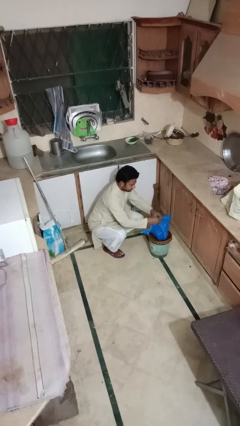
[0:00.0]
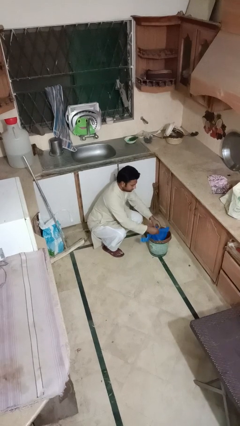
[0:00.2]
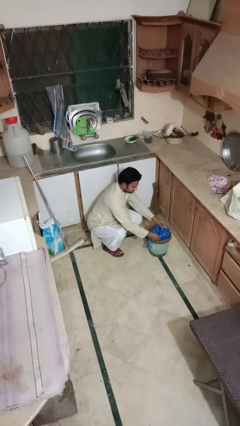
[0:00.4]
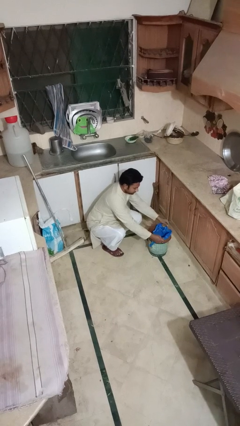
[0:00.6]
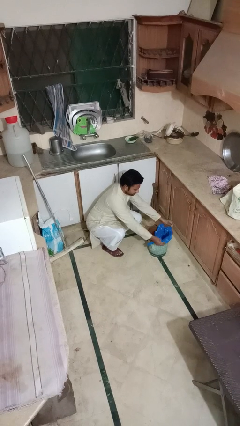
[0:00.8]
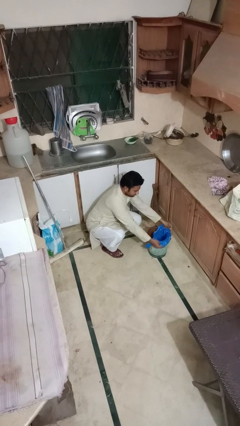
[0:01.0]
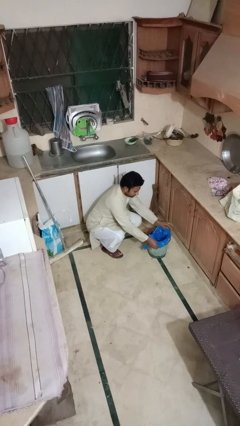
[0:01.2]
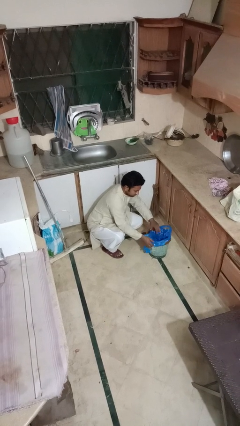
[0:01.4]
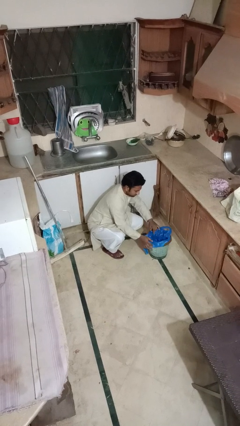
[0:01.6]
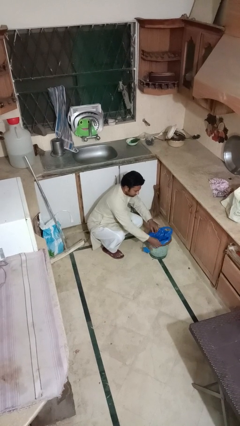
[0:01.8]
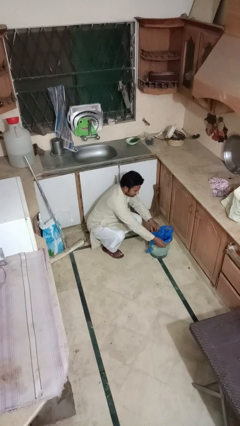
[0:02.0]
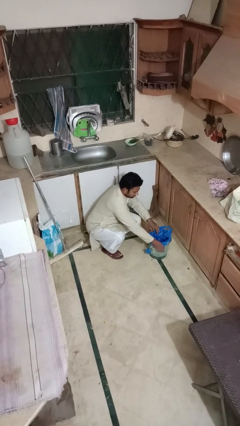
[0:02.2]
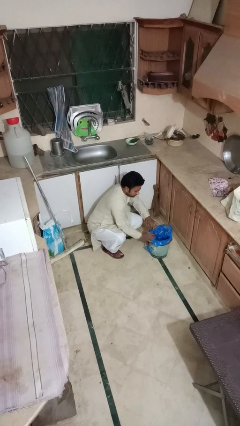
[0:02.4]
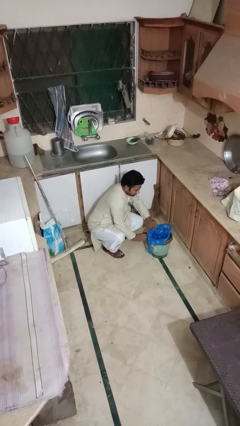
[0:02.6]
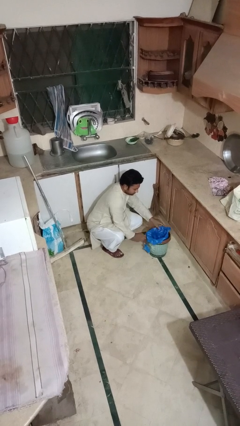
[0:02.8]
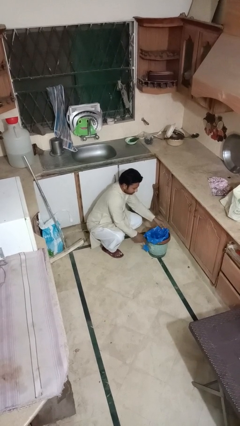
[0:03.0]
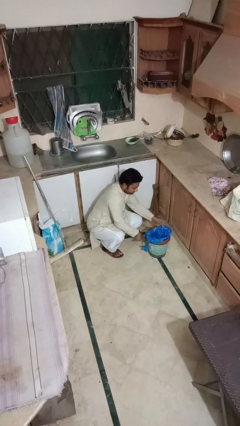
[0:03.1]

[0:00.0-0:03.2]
person inserts trashbag into trashcan

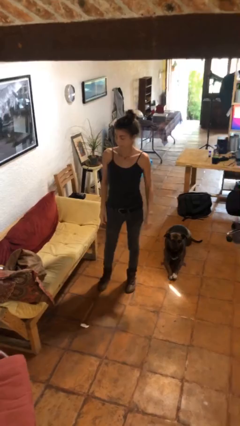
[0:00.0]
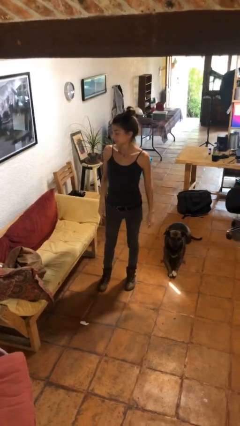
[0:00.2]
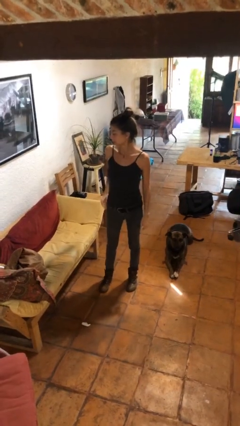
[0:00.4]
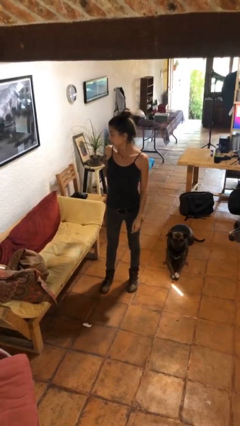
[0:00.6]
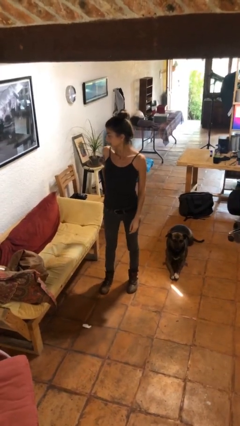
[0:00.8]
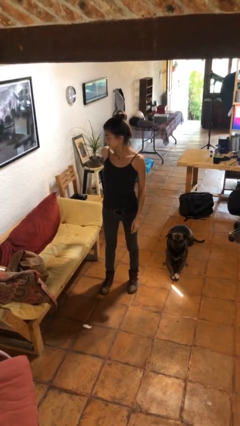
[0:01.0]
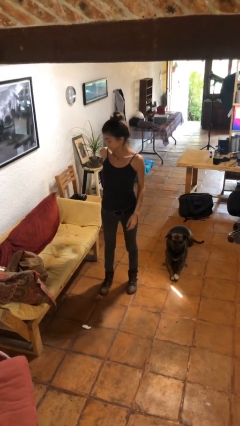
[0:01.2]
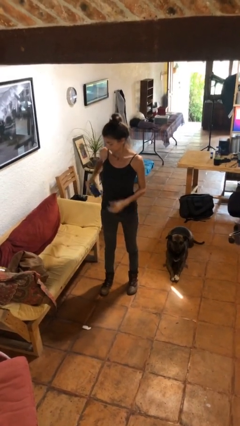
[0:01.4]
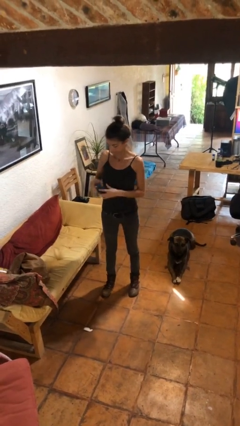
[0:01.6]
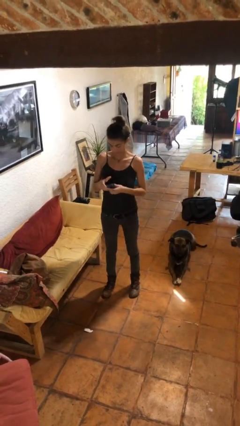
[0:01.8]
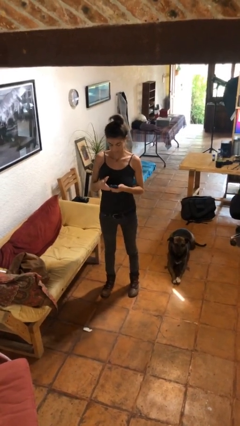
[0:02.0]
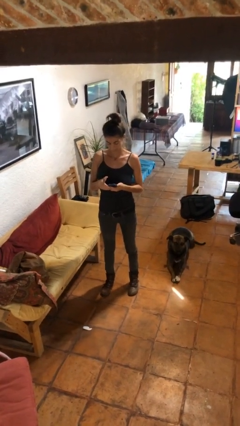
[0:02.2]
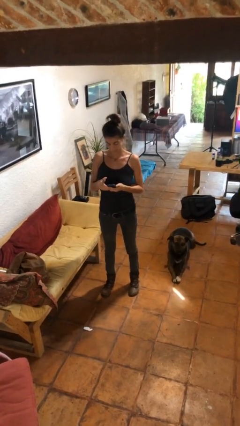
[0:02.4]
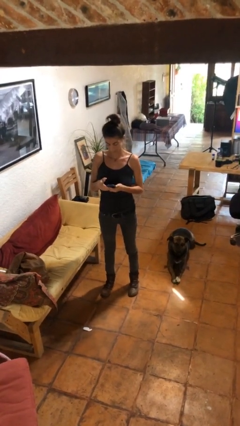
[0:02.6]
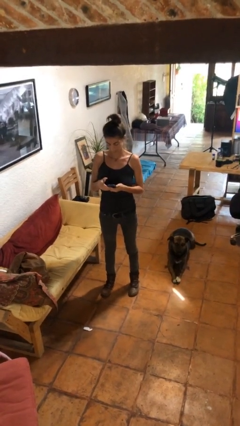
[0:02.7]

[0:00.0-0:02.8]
person takes phone from pocket

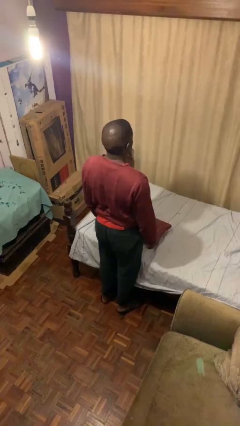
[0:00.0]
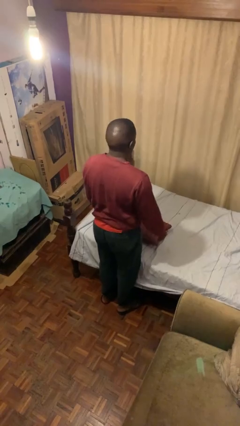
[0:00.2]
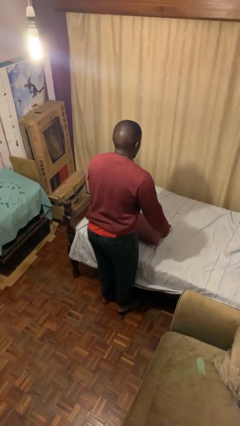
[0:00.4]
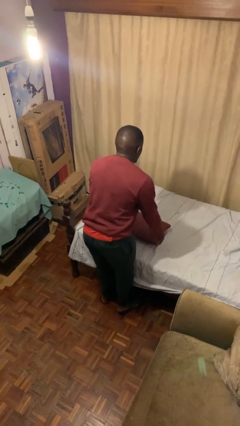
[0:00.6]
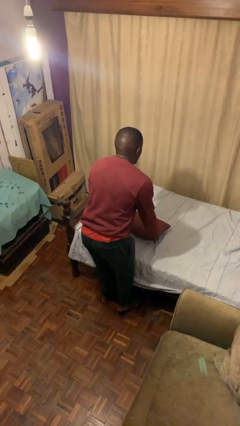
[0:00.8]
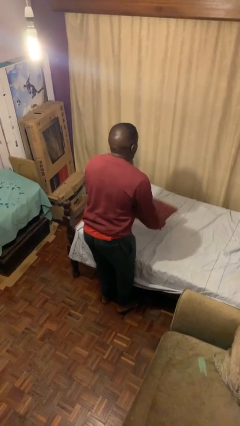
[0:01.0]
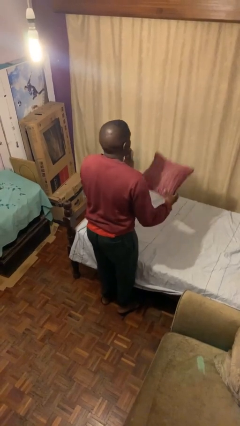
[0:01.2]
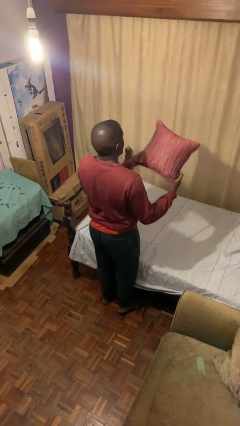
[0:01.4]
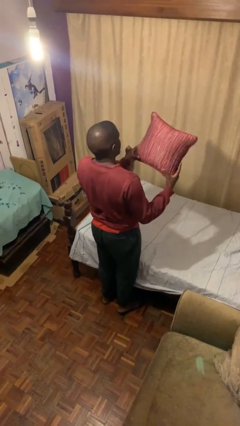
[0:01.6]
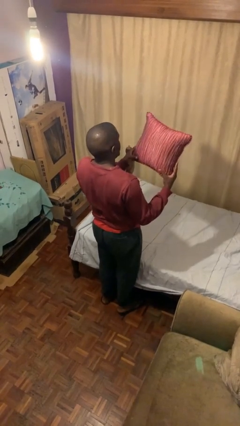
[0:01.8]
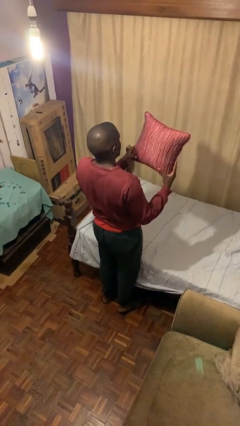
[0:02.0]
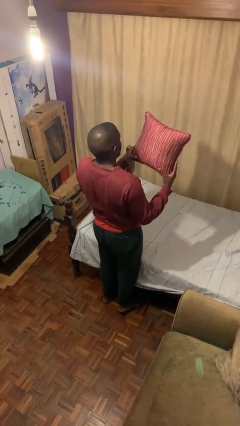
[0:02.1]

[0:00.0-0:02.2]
person picks up object from bed

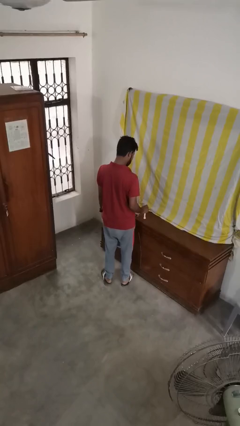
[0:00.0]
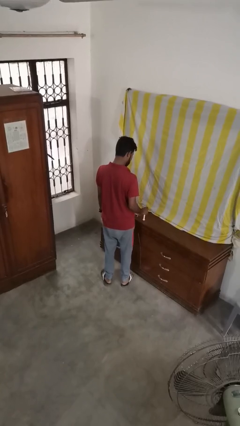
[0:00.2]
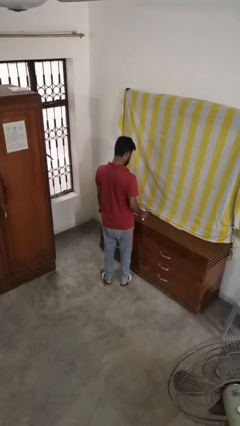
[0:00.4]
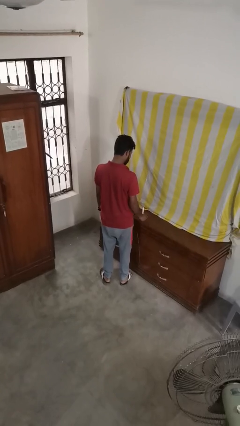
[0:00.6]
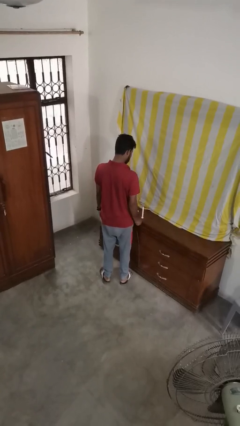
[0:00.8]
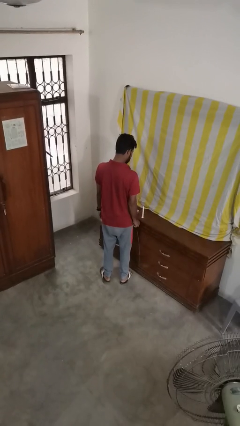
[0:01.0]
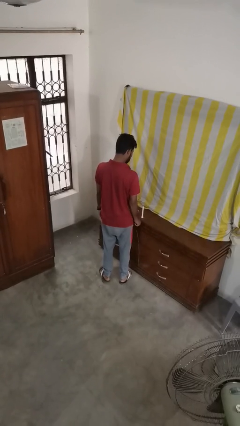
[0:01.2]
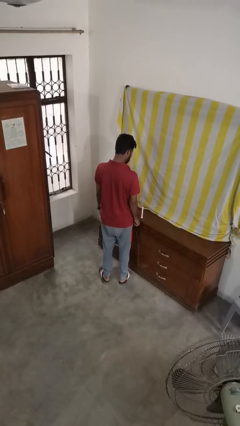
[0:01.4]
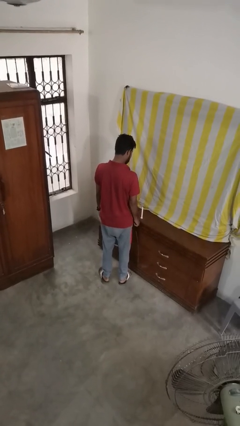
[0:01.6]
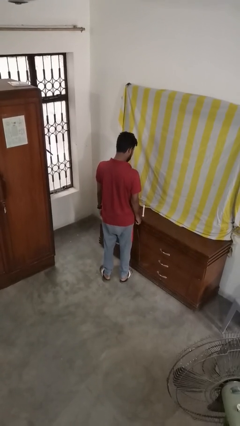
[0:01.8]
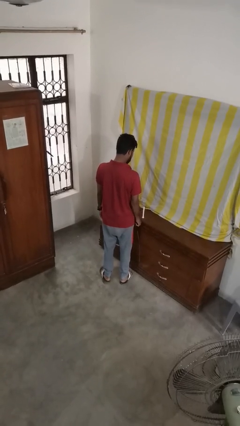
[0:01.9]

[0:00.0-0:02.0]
person extinguishes candle

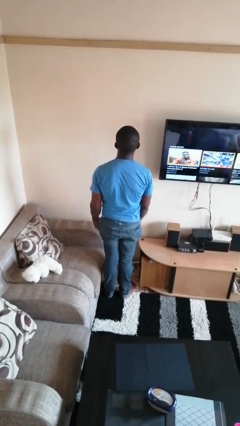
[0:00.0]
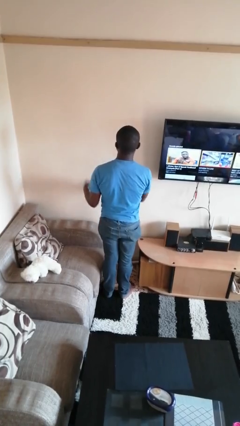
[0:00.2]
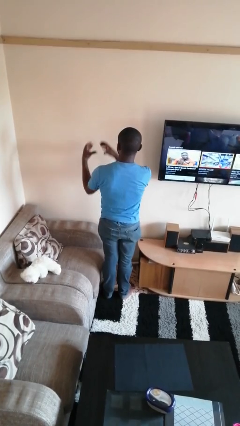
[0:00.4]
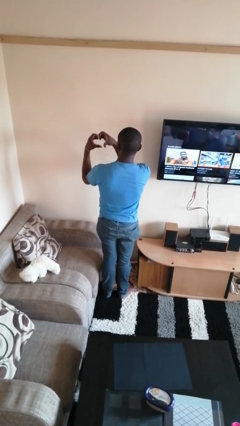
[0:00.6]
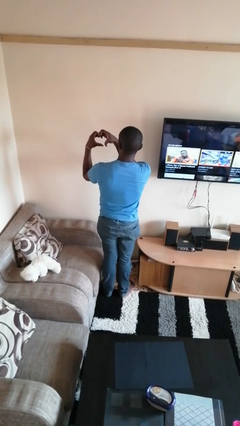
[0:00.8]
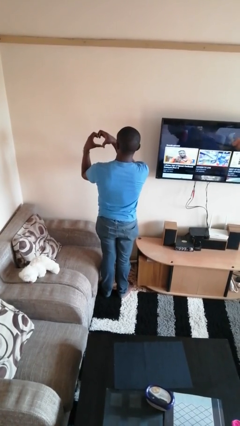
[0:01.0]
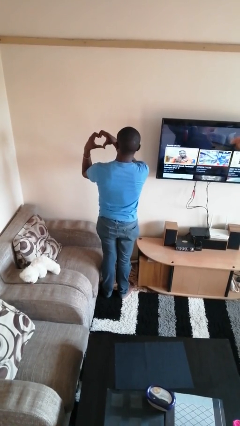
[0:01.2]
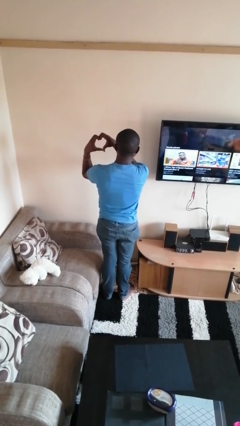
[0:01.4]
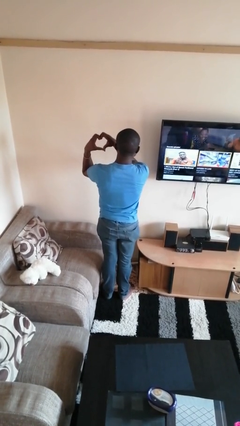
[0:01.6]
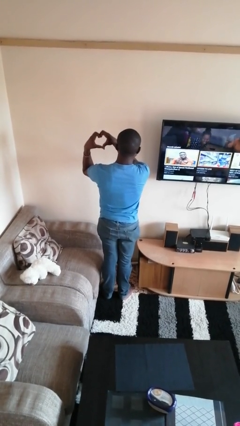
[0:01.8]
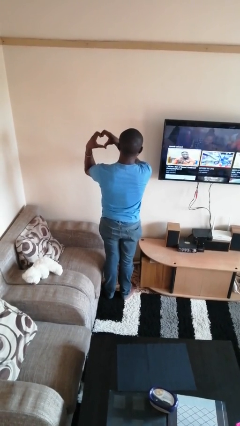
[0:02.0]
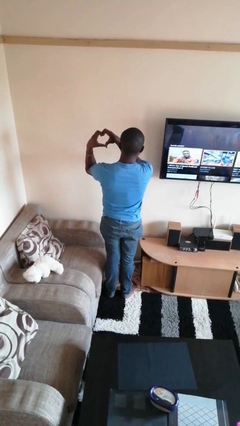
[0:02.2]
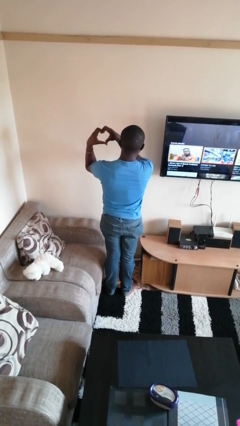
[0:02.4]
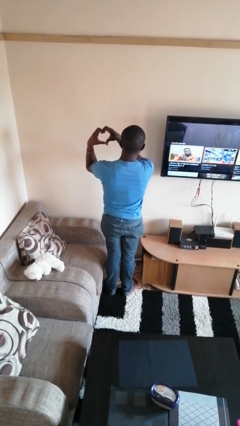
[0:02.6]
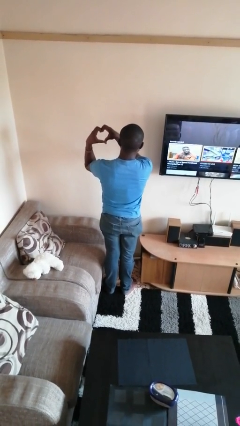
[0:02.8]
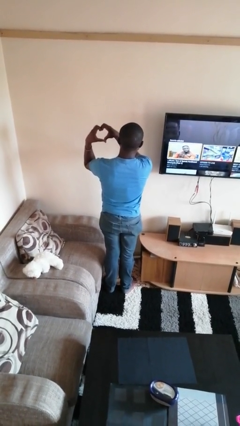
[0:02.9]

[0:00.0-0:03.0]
person gestures heart

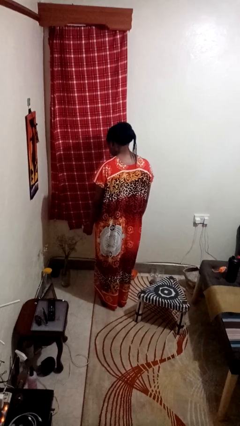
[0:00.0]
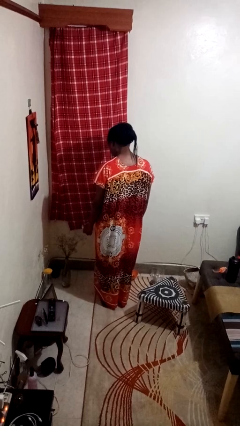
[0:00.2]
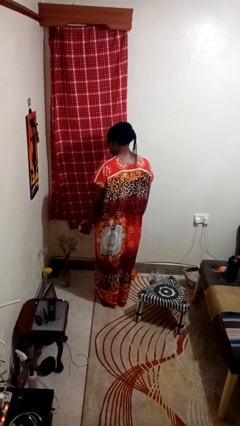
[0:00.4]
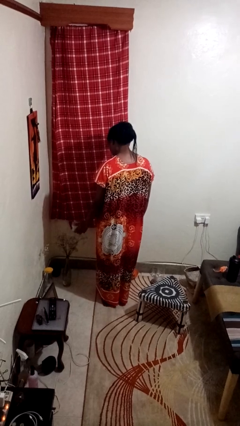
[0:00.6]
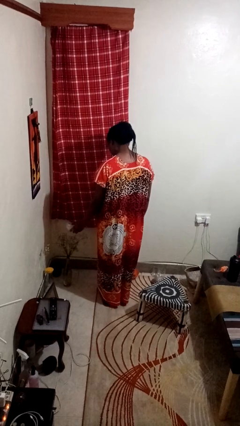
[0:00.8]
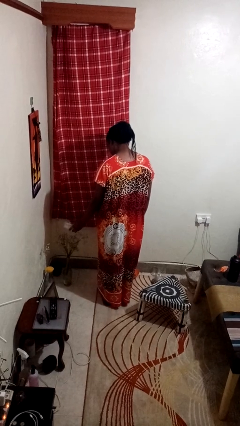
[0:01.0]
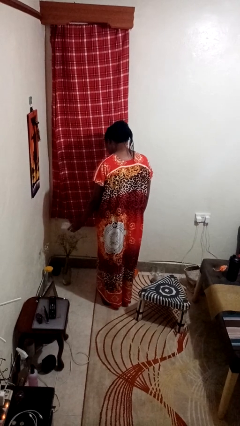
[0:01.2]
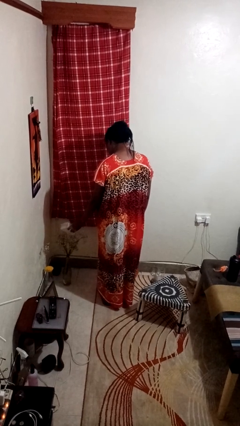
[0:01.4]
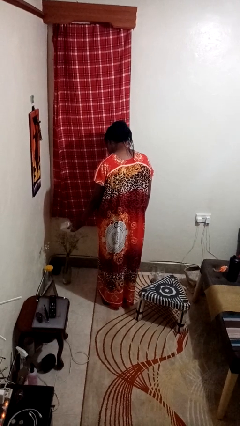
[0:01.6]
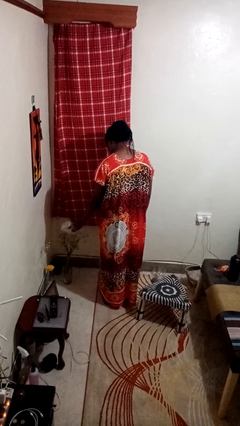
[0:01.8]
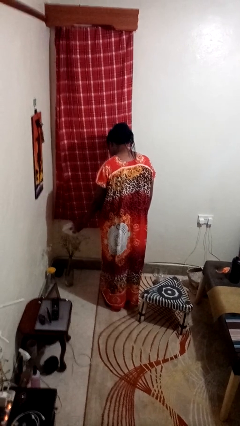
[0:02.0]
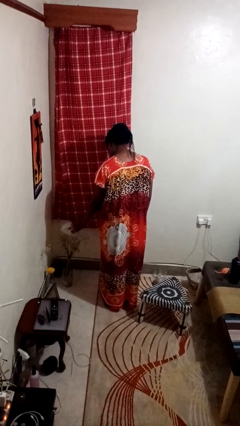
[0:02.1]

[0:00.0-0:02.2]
person waters houseplant

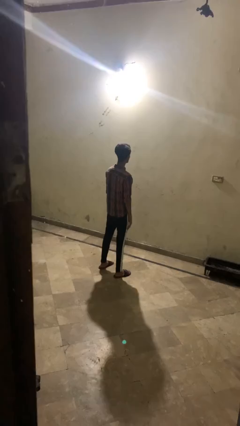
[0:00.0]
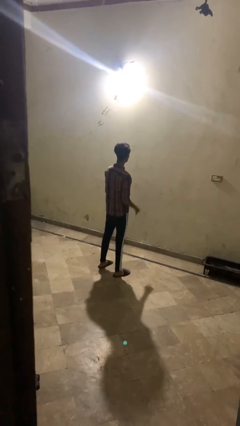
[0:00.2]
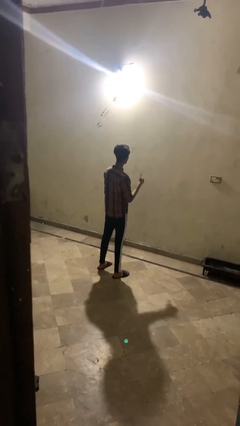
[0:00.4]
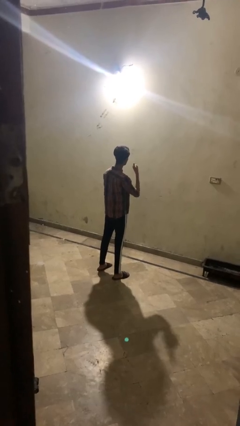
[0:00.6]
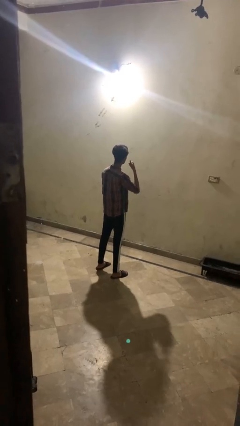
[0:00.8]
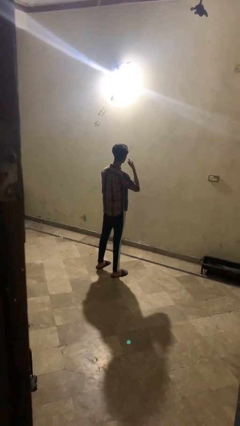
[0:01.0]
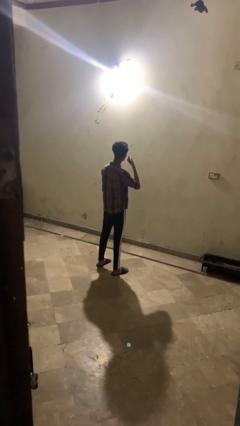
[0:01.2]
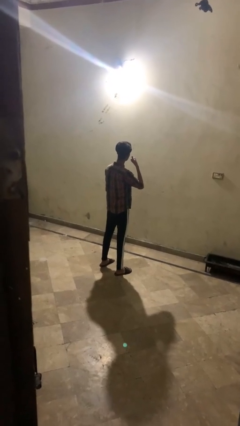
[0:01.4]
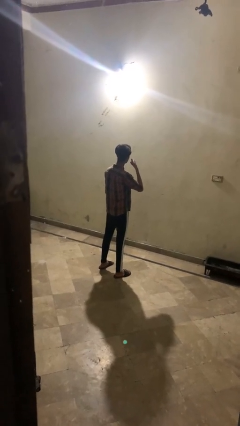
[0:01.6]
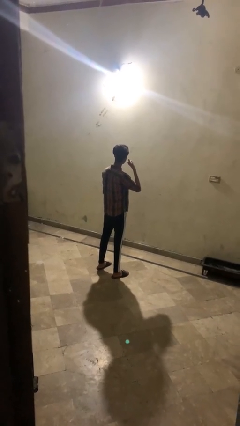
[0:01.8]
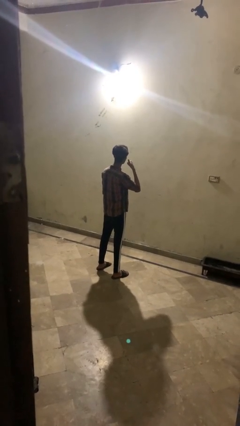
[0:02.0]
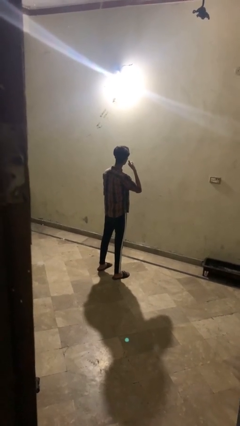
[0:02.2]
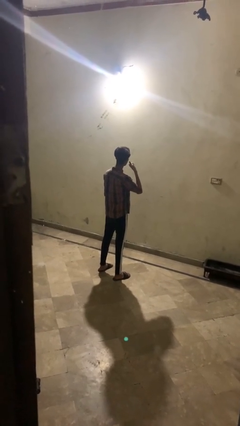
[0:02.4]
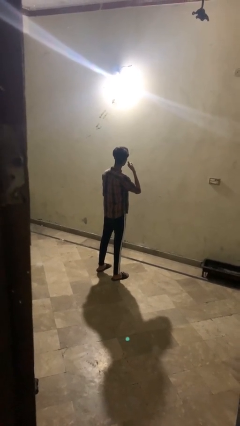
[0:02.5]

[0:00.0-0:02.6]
person gestures call me
